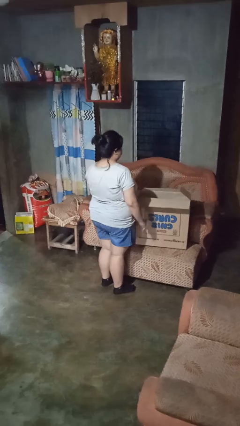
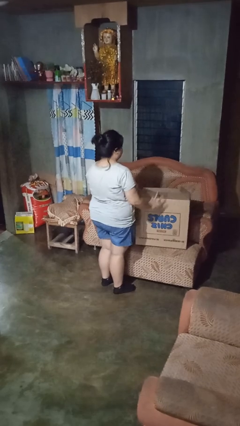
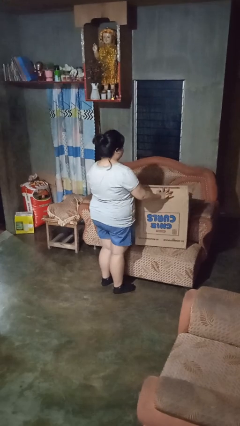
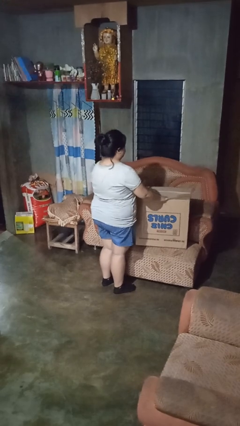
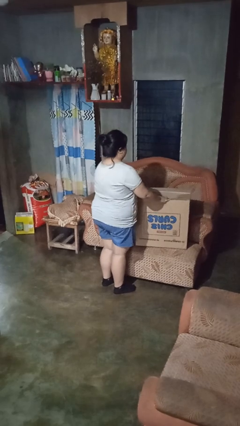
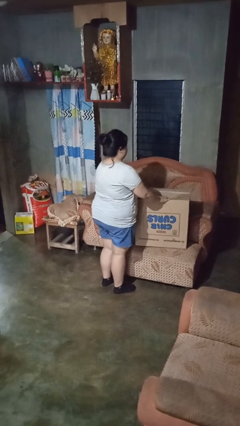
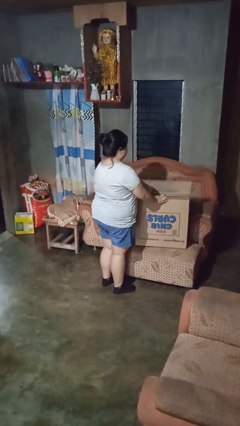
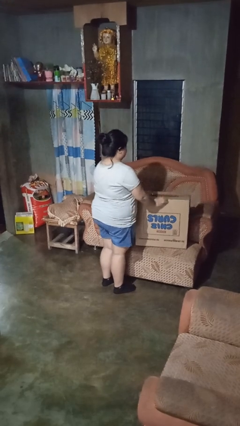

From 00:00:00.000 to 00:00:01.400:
person closes box

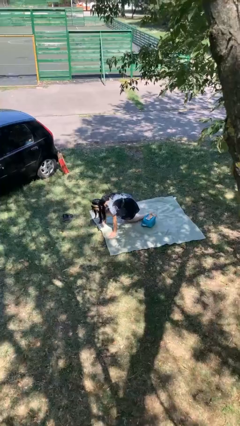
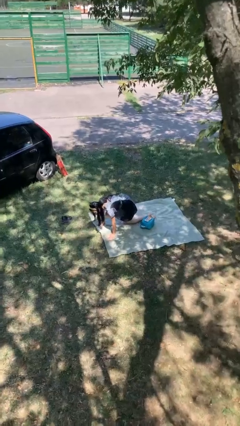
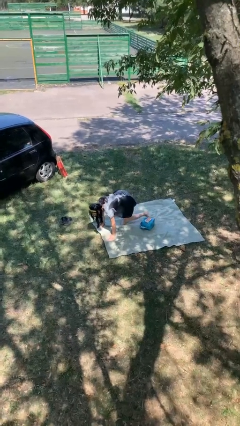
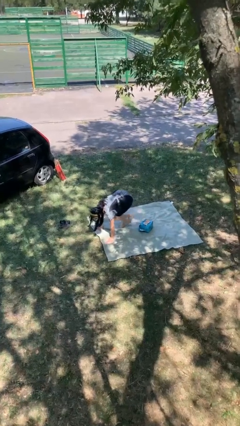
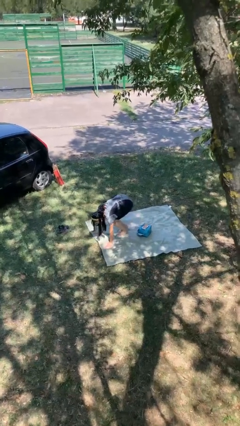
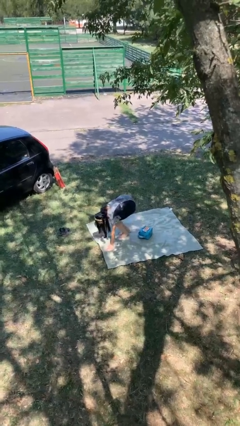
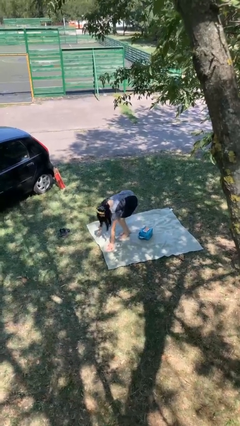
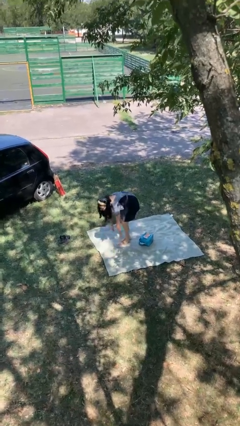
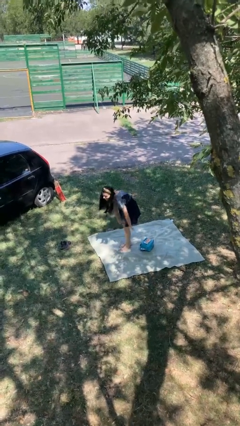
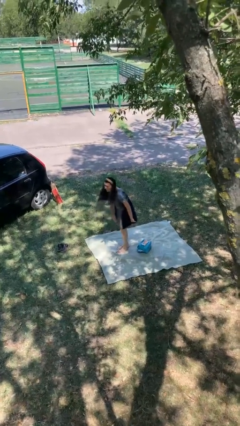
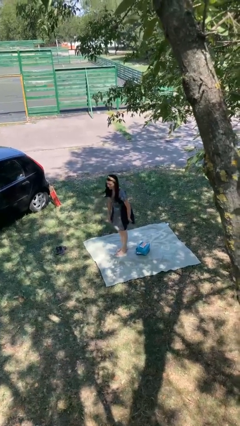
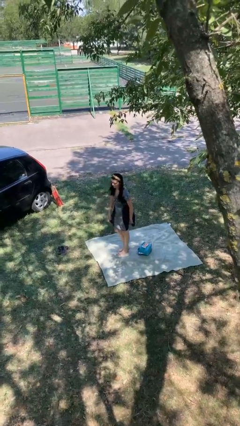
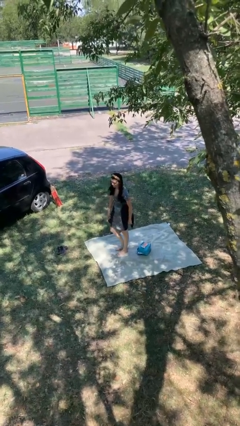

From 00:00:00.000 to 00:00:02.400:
person stands up from floor

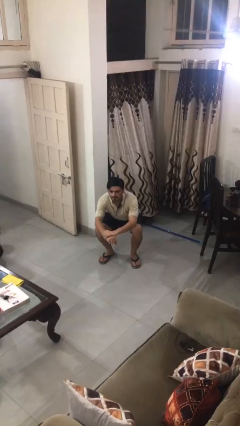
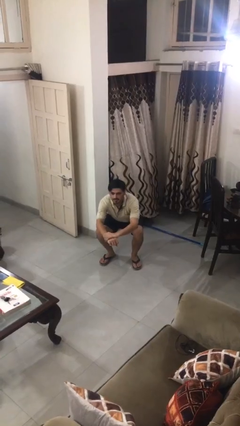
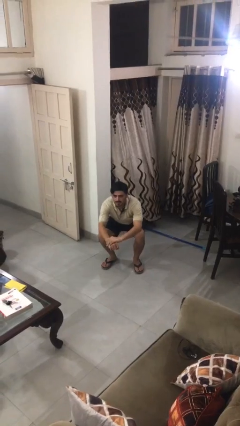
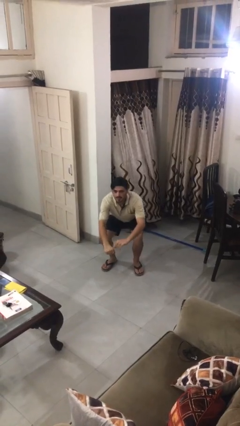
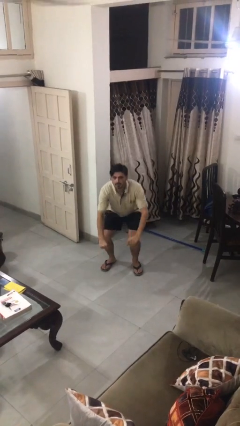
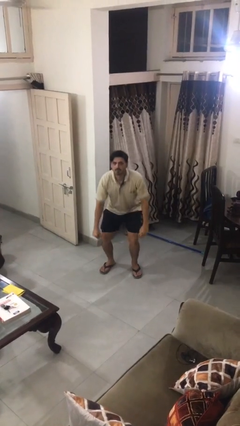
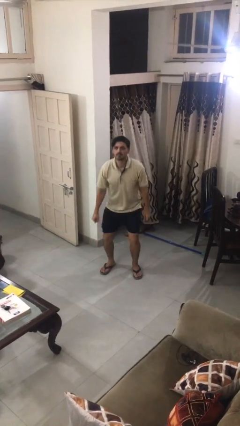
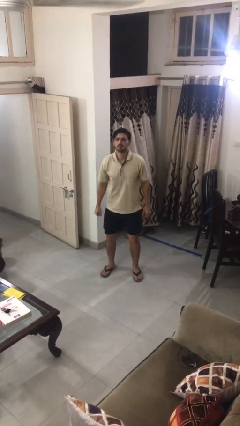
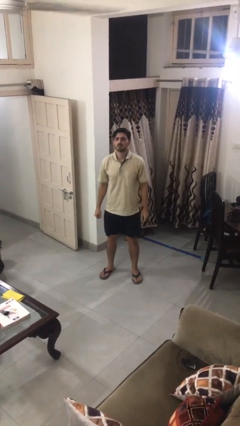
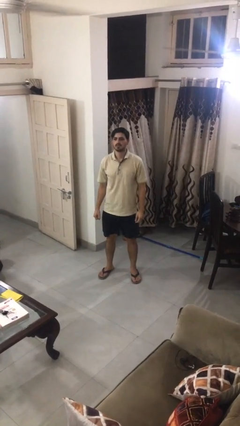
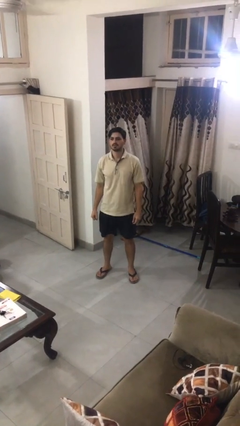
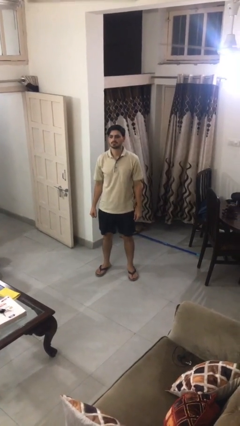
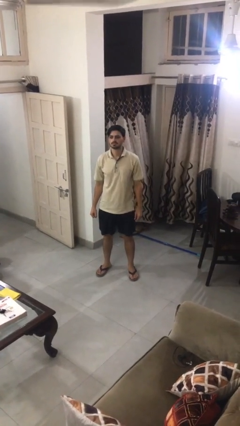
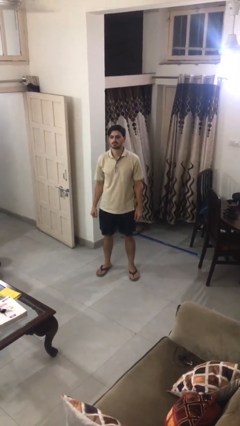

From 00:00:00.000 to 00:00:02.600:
person stands up

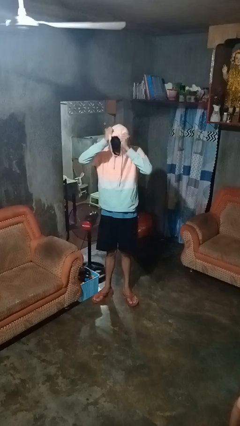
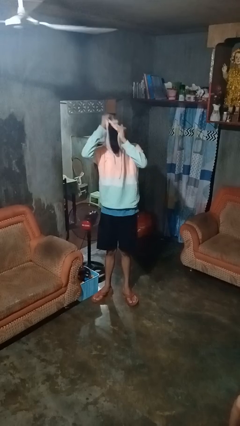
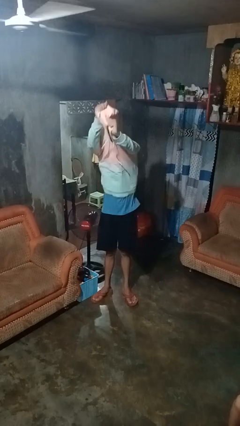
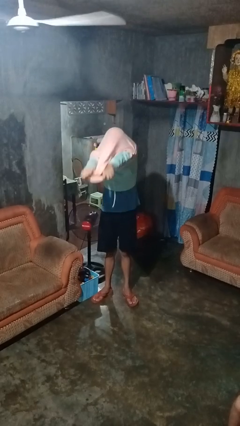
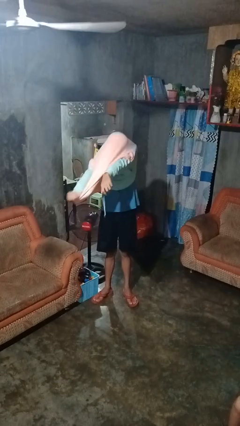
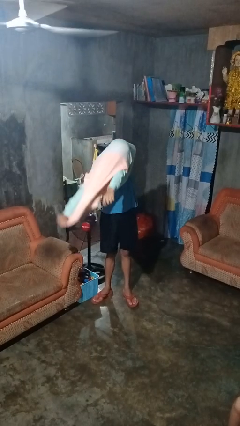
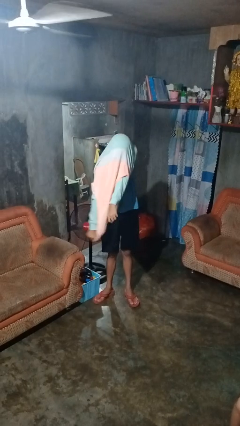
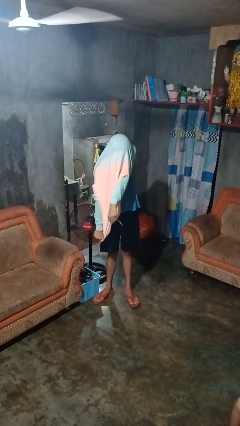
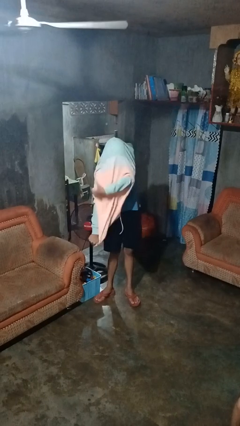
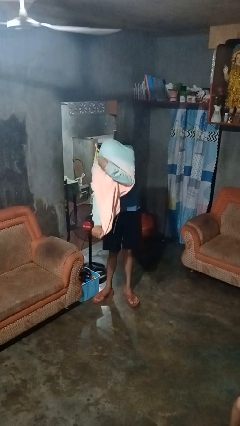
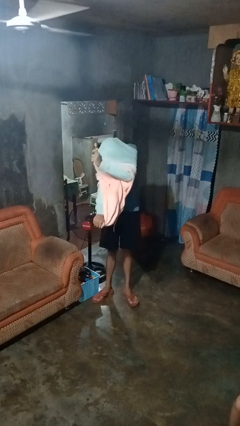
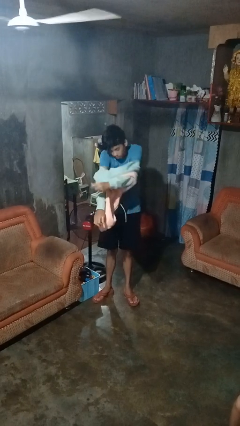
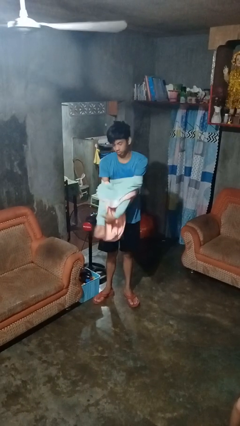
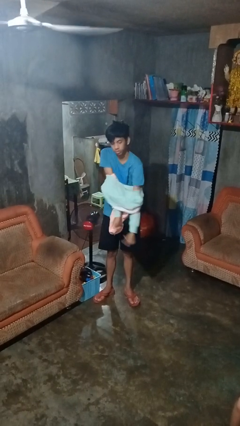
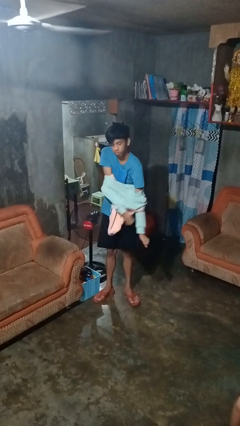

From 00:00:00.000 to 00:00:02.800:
person takes off hoodie

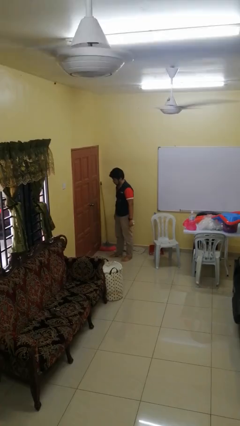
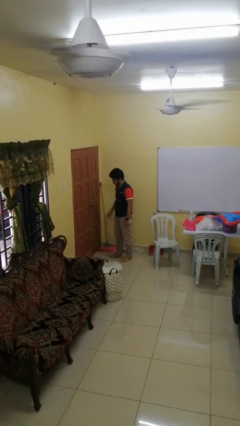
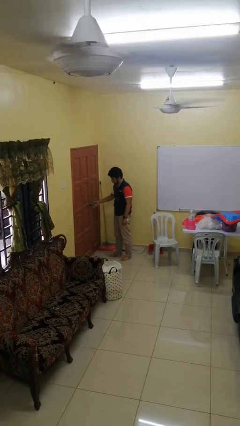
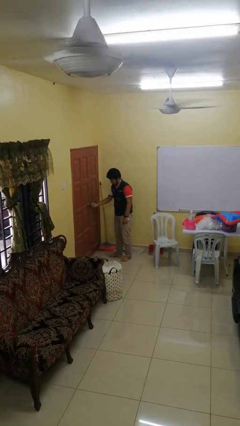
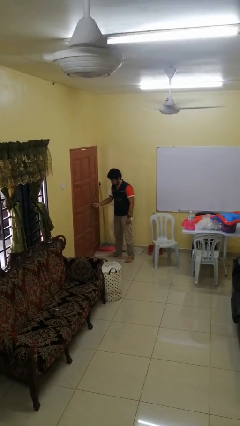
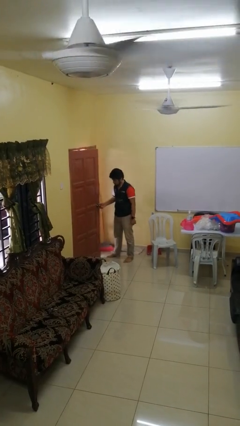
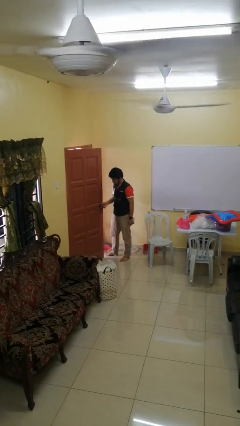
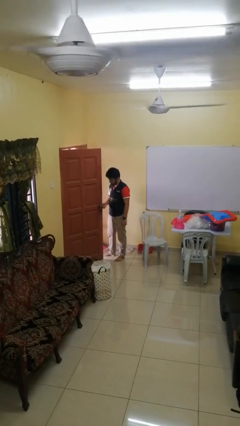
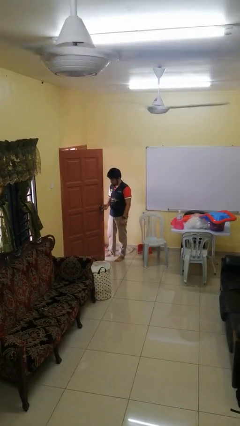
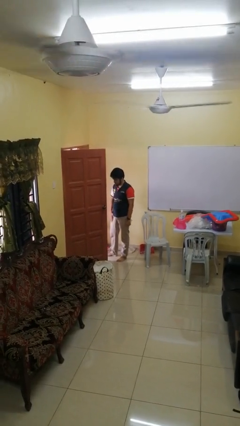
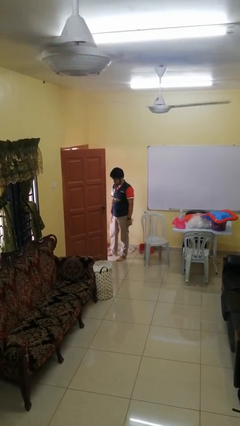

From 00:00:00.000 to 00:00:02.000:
person opens facility door

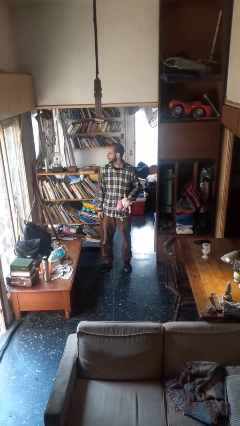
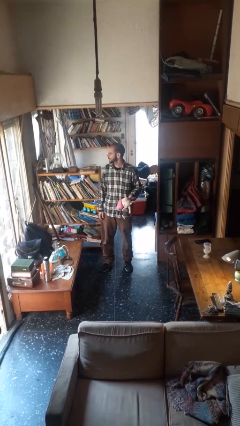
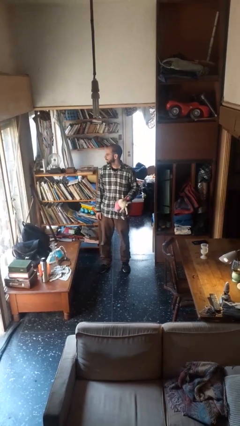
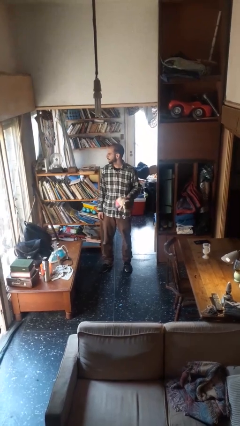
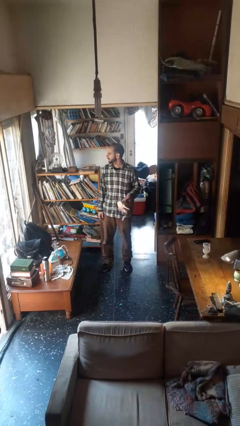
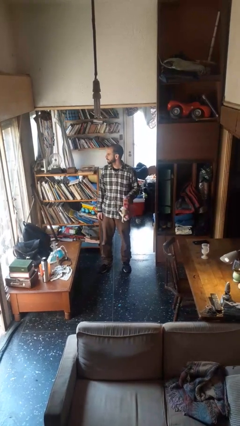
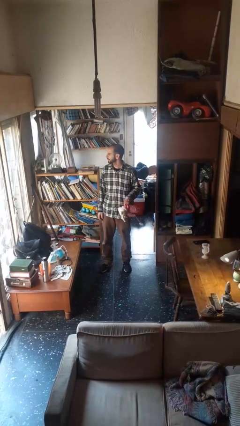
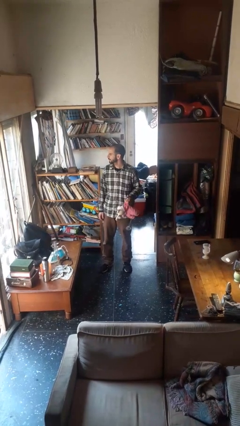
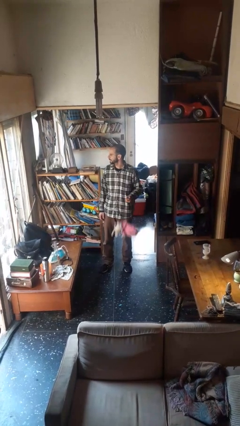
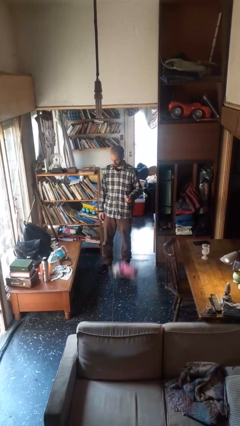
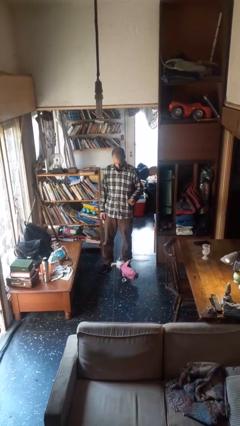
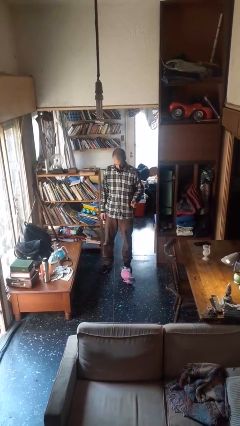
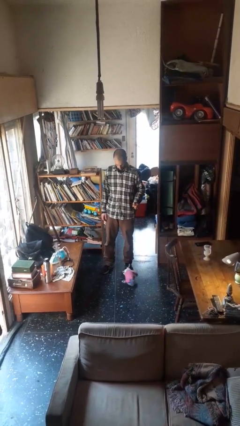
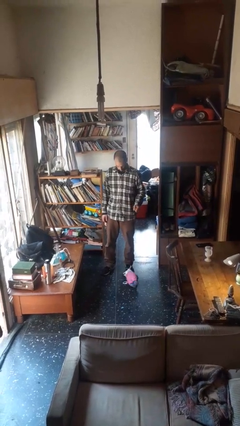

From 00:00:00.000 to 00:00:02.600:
person drops object

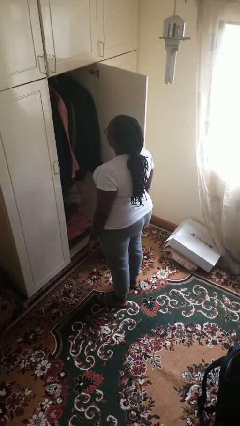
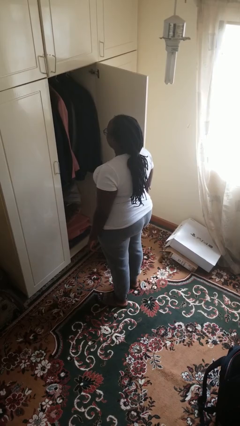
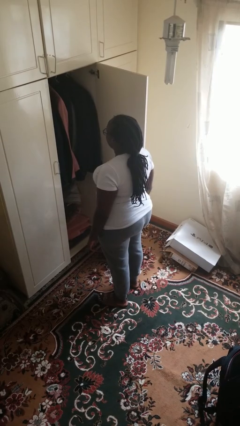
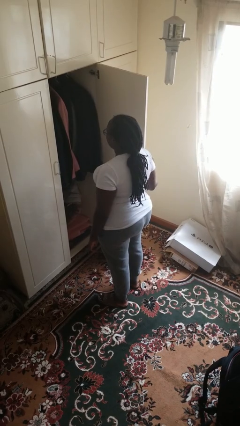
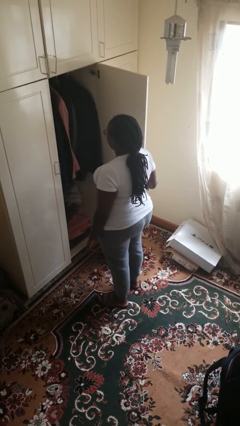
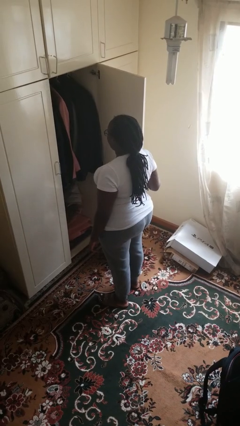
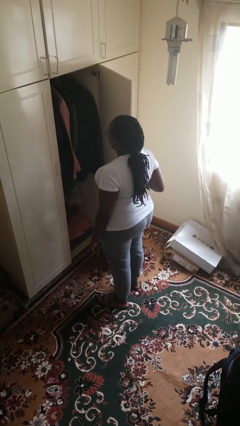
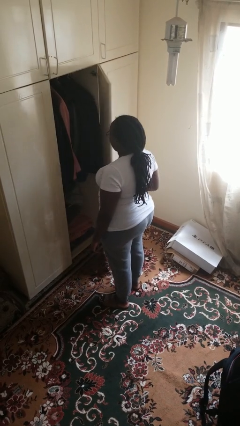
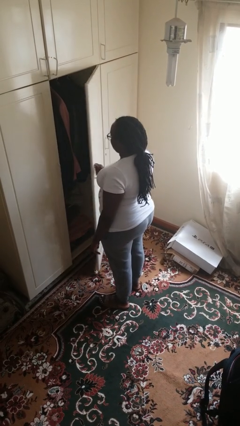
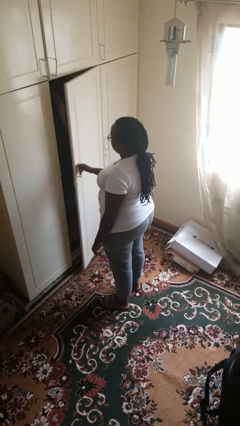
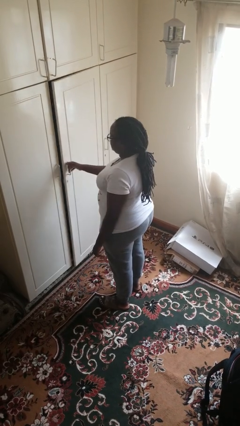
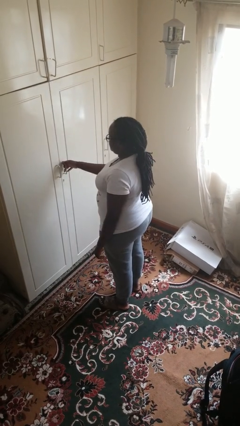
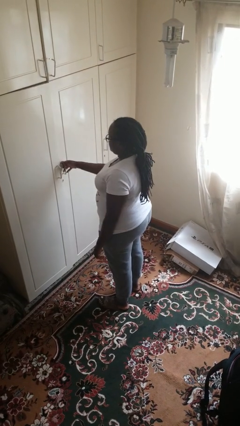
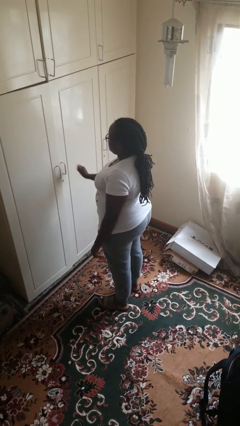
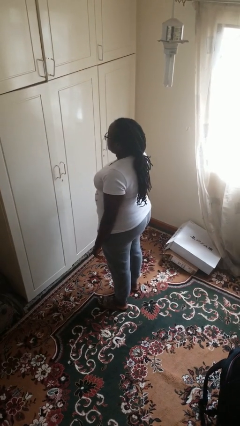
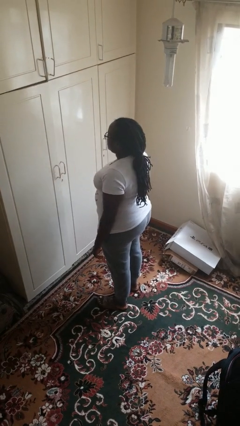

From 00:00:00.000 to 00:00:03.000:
person closes closet door
